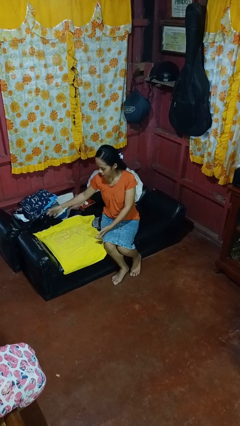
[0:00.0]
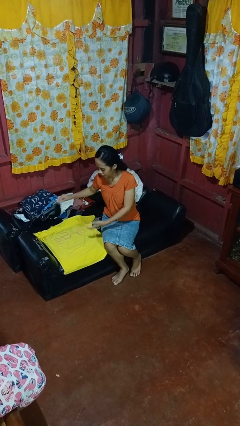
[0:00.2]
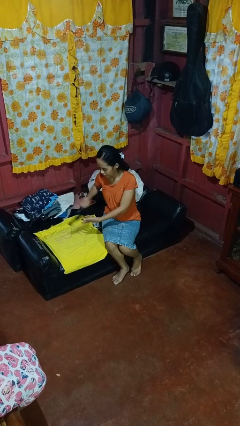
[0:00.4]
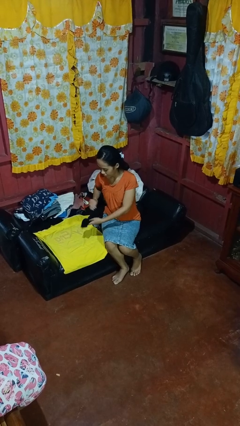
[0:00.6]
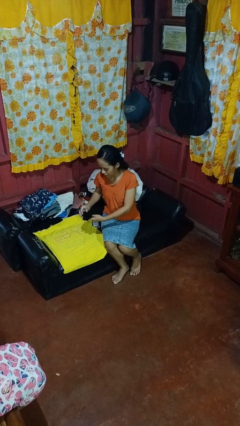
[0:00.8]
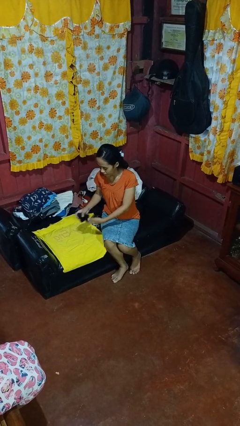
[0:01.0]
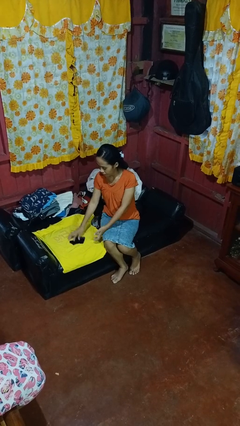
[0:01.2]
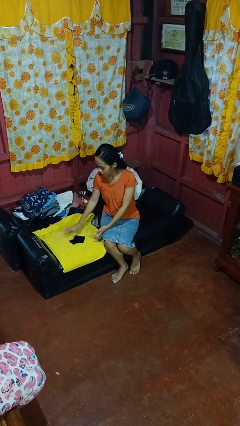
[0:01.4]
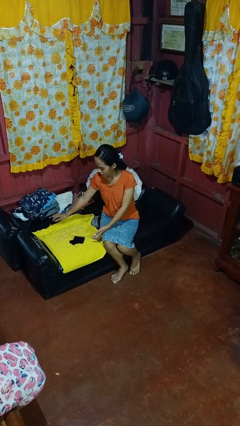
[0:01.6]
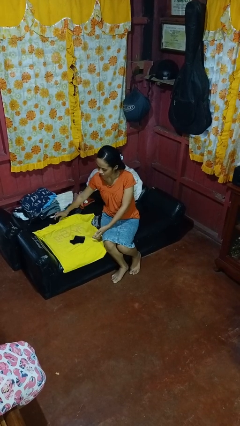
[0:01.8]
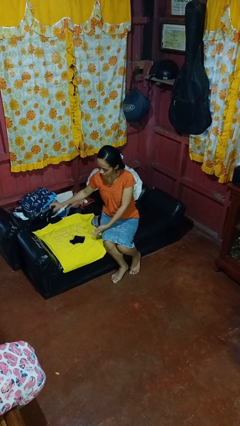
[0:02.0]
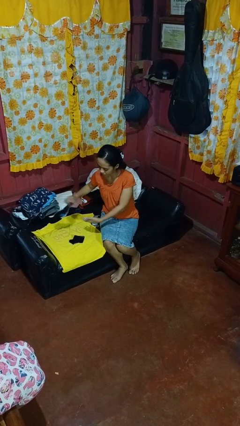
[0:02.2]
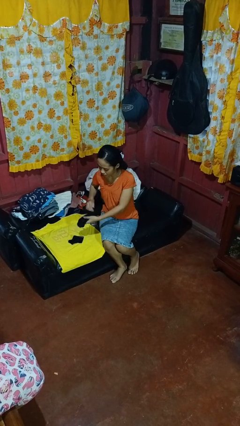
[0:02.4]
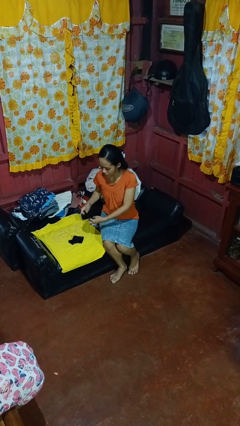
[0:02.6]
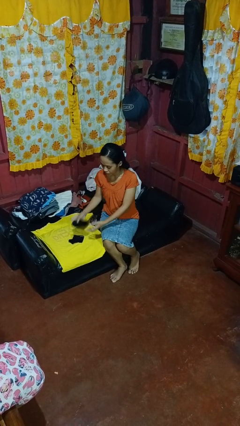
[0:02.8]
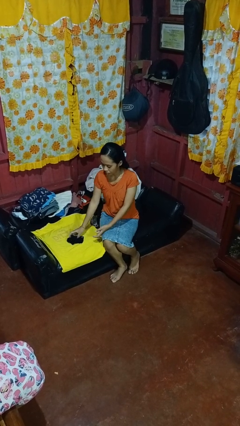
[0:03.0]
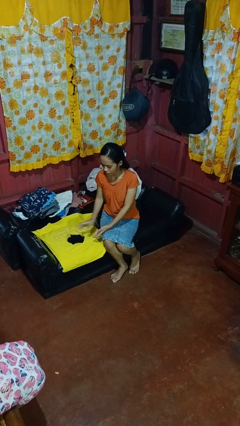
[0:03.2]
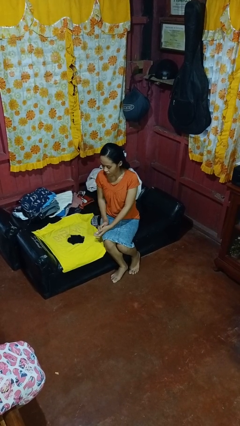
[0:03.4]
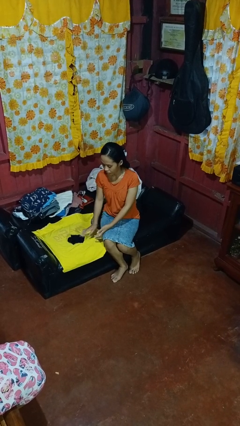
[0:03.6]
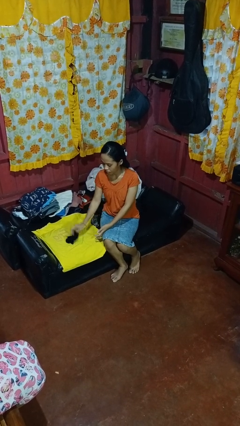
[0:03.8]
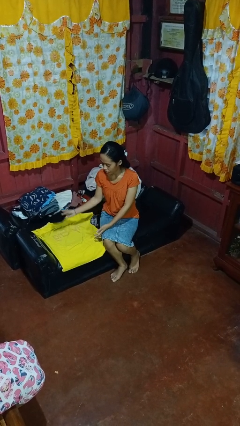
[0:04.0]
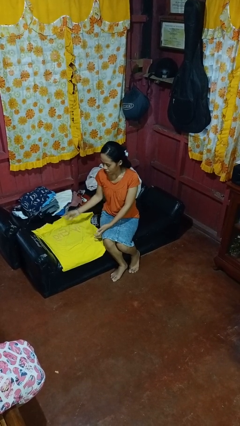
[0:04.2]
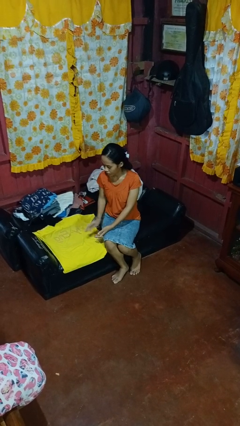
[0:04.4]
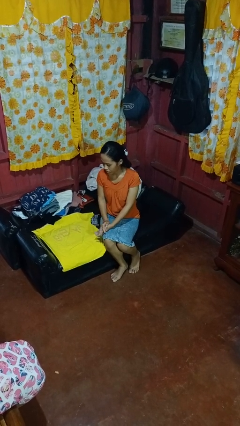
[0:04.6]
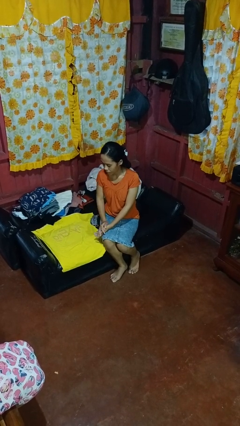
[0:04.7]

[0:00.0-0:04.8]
person folds socks

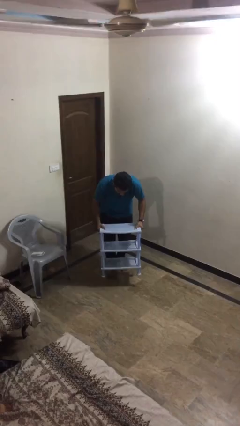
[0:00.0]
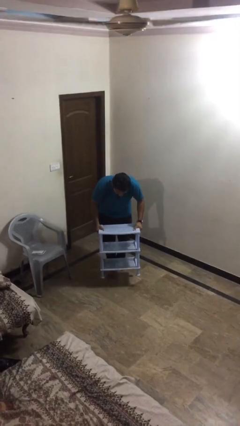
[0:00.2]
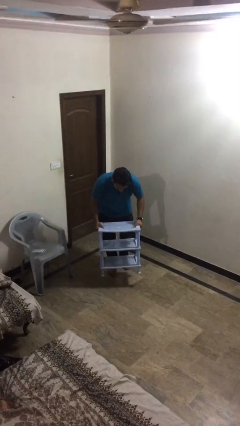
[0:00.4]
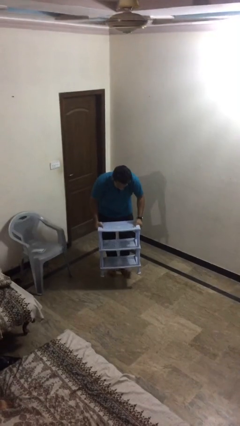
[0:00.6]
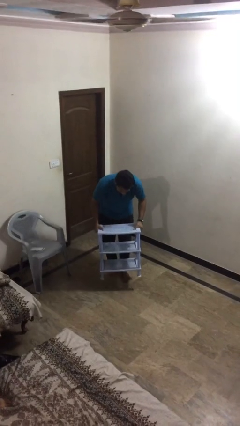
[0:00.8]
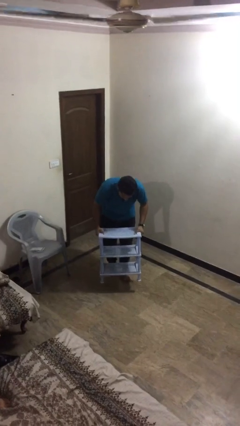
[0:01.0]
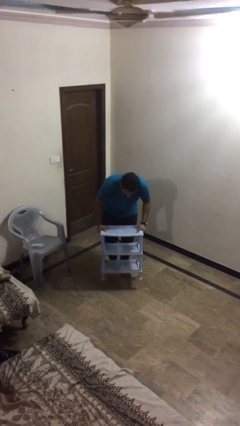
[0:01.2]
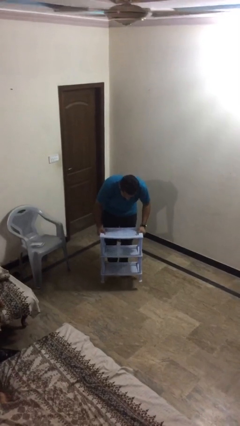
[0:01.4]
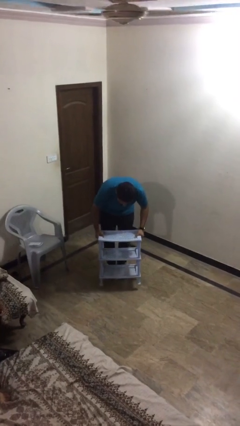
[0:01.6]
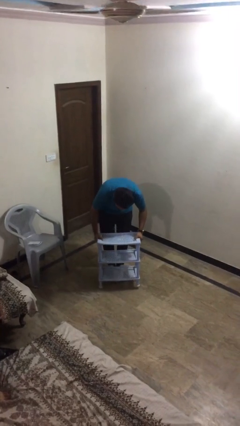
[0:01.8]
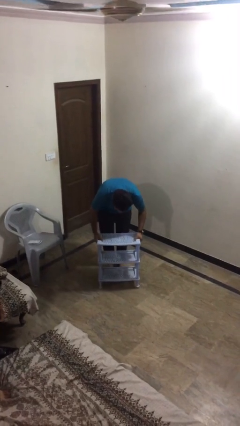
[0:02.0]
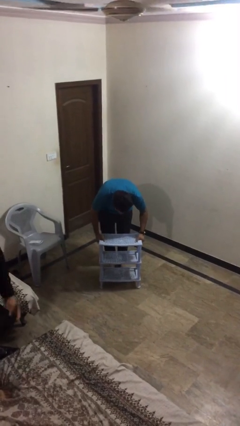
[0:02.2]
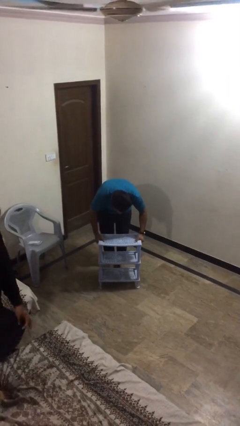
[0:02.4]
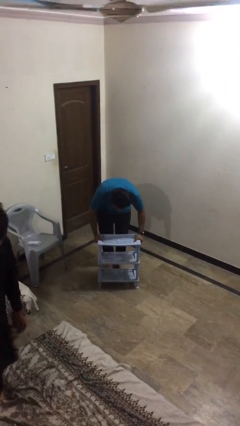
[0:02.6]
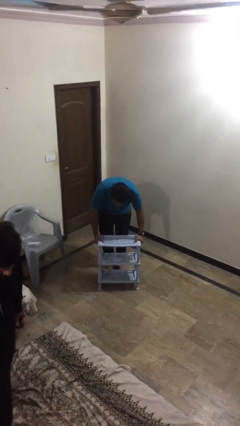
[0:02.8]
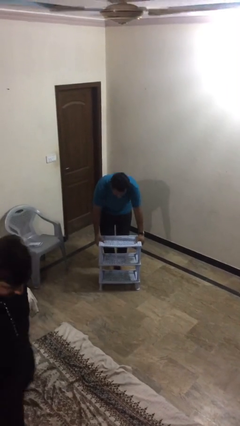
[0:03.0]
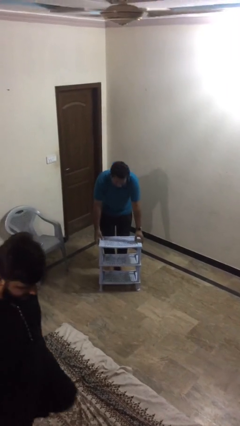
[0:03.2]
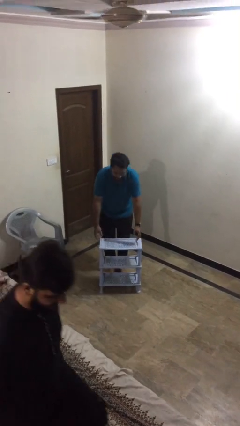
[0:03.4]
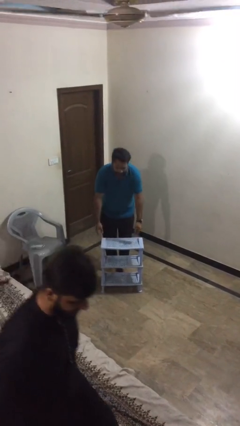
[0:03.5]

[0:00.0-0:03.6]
person puts down object on floor

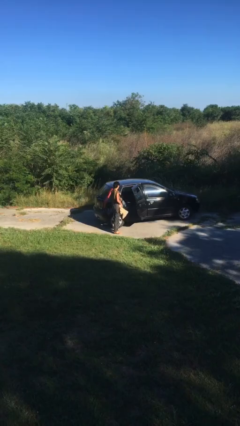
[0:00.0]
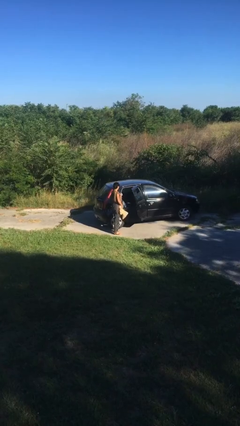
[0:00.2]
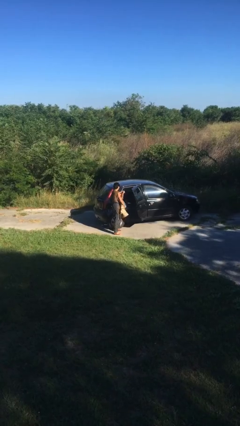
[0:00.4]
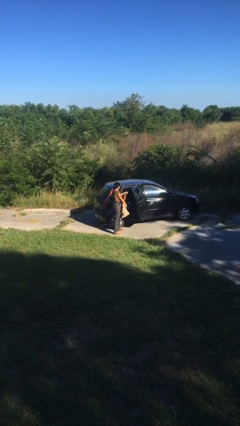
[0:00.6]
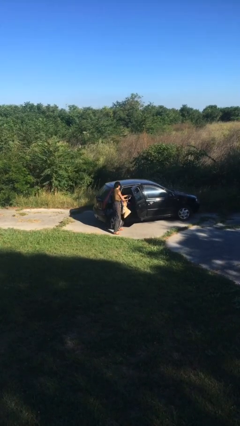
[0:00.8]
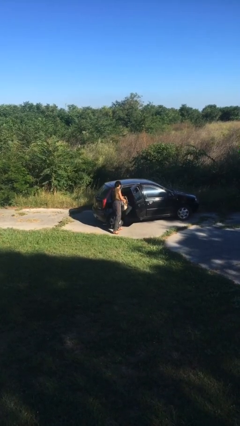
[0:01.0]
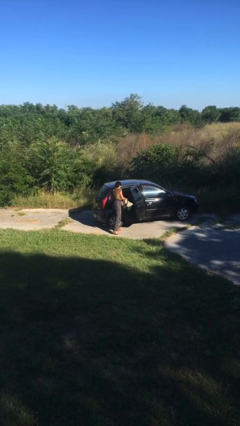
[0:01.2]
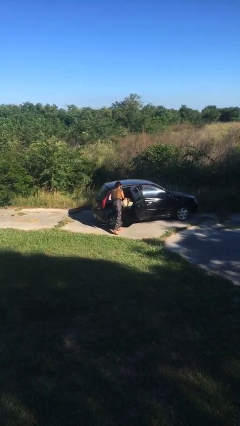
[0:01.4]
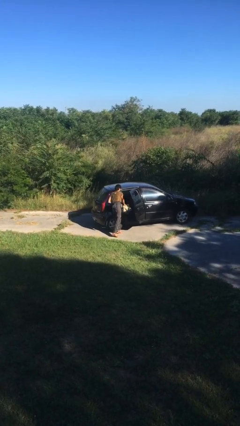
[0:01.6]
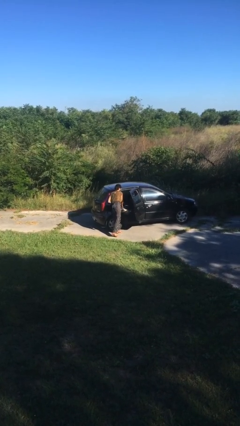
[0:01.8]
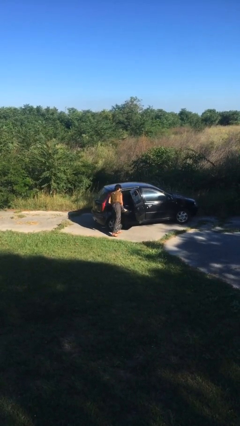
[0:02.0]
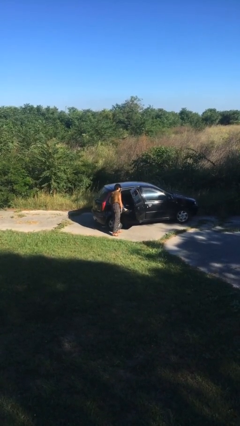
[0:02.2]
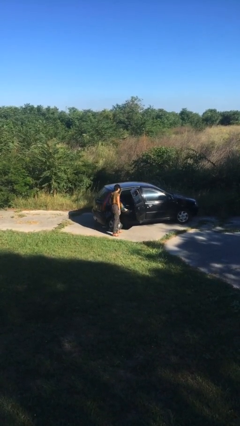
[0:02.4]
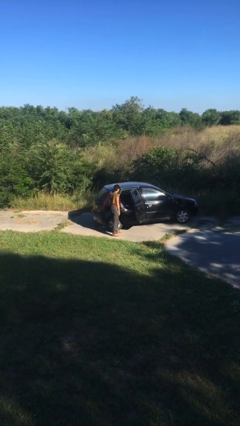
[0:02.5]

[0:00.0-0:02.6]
person loads car

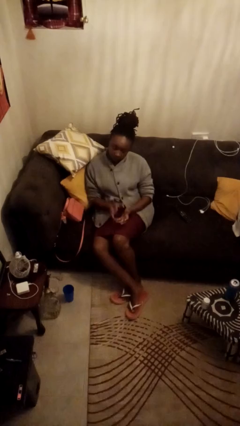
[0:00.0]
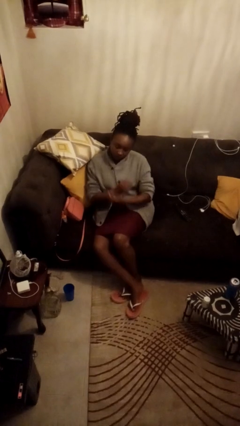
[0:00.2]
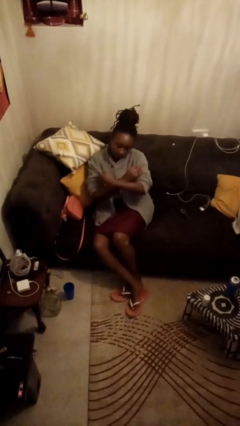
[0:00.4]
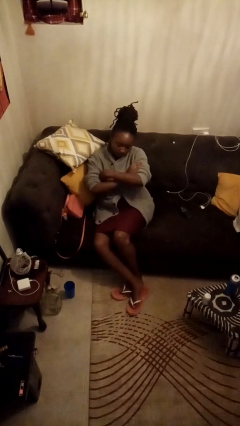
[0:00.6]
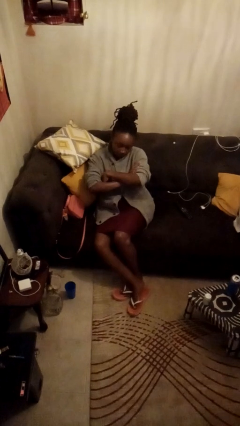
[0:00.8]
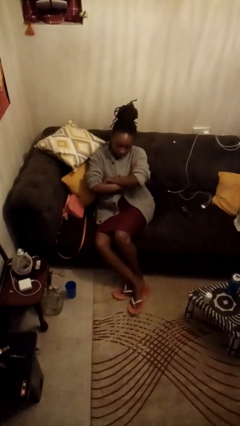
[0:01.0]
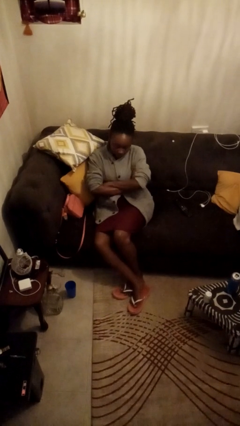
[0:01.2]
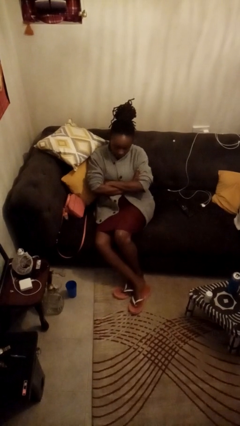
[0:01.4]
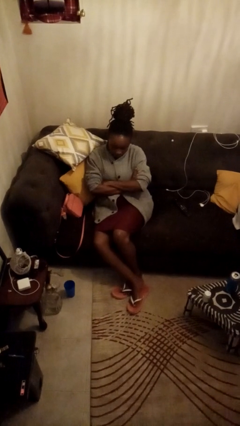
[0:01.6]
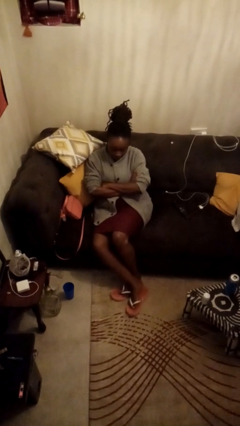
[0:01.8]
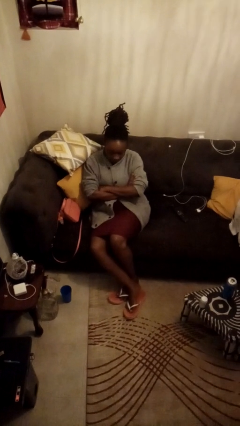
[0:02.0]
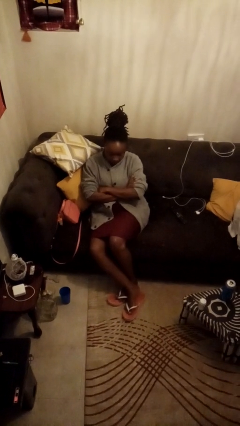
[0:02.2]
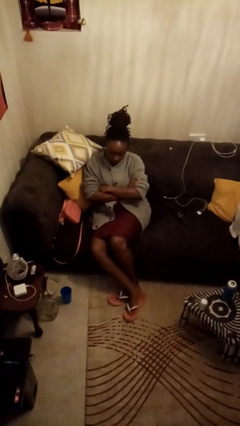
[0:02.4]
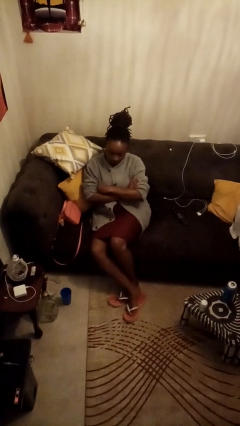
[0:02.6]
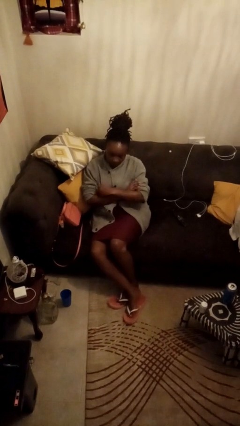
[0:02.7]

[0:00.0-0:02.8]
person crosses arms

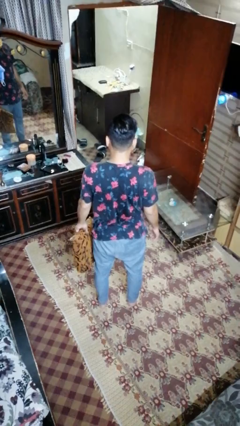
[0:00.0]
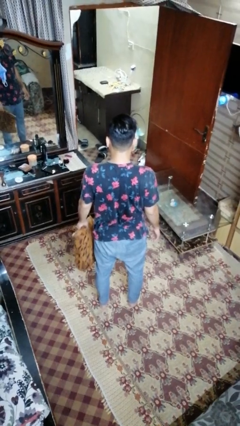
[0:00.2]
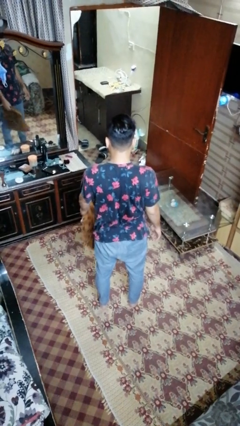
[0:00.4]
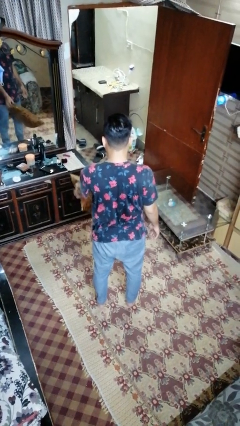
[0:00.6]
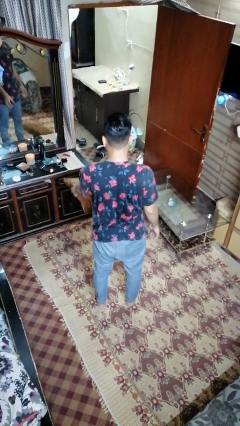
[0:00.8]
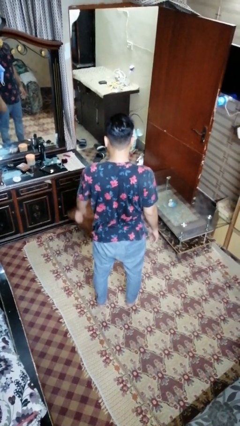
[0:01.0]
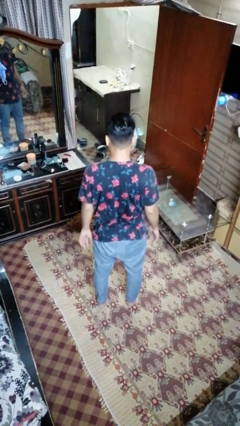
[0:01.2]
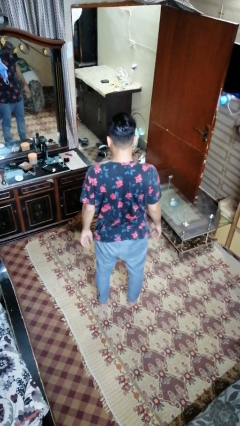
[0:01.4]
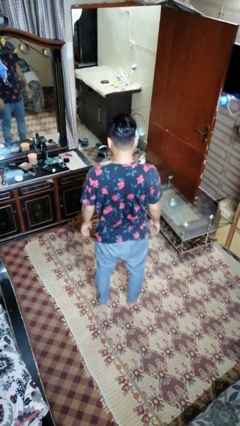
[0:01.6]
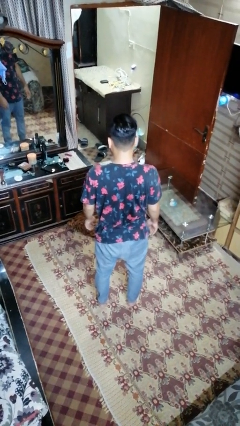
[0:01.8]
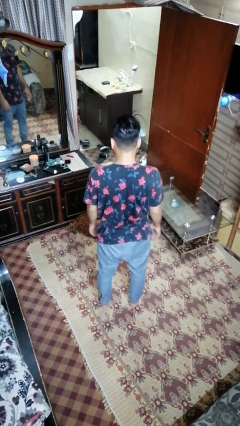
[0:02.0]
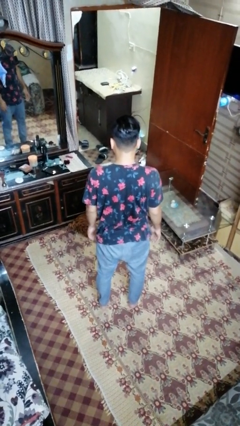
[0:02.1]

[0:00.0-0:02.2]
person throws object to ground

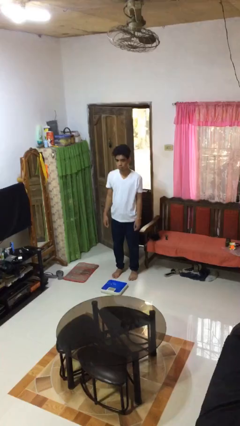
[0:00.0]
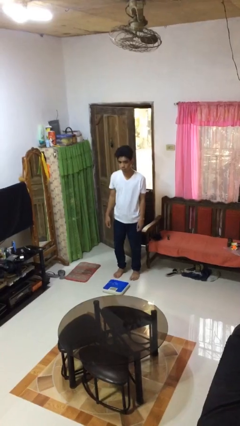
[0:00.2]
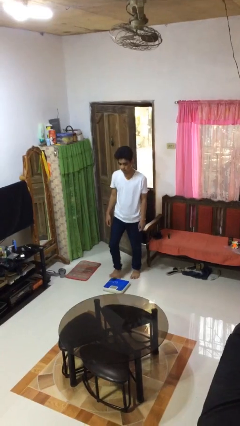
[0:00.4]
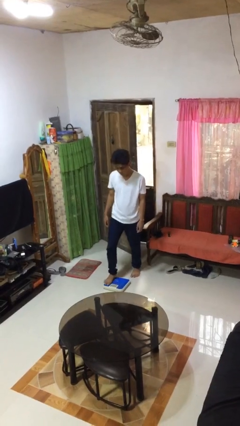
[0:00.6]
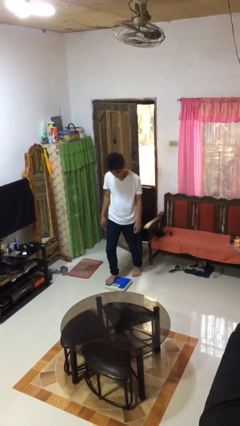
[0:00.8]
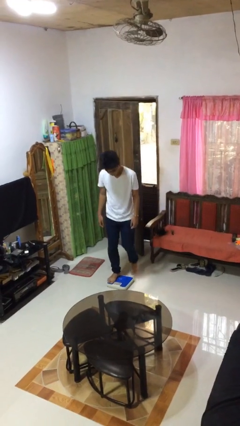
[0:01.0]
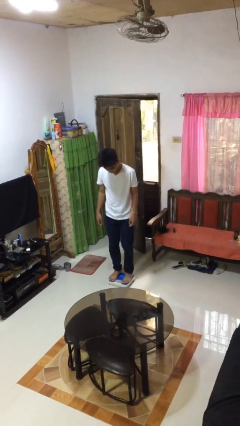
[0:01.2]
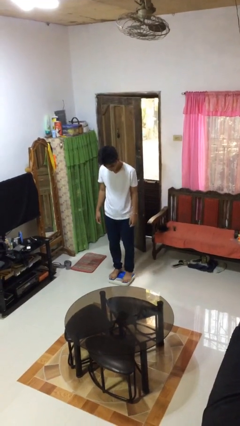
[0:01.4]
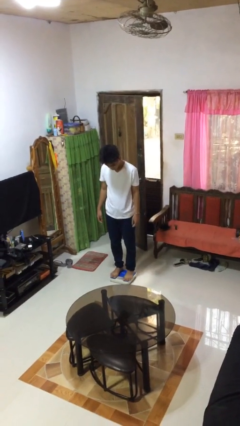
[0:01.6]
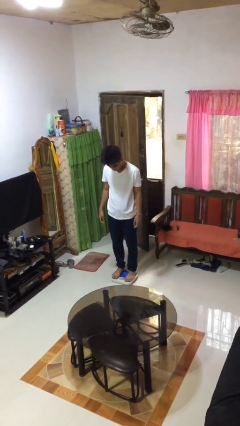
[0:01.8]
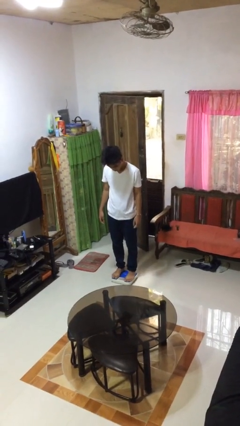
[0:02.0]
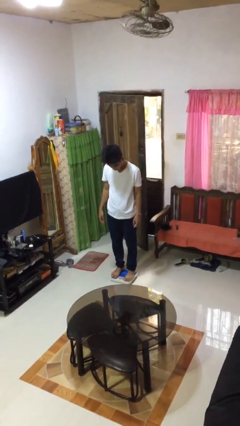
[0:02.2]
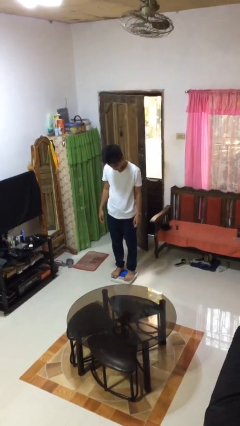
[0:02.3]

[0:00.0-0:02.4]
person uses bodyweight scale
